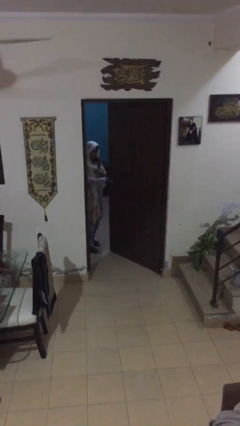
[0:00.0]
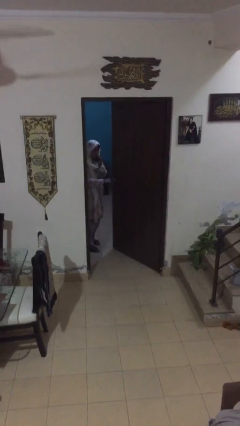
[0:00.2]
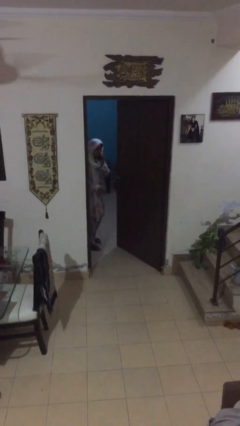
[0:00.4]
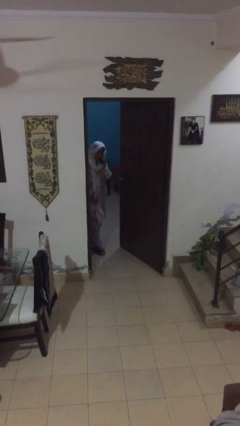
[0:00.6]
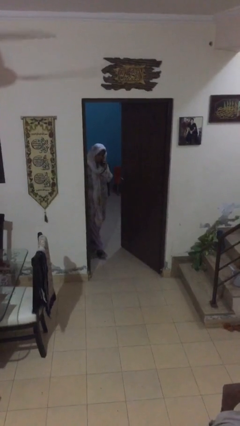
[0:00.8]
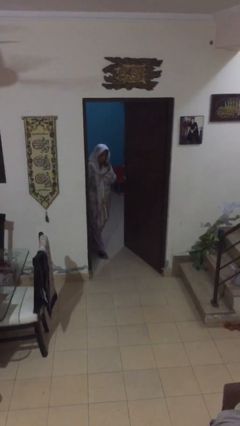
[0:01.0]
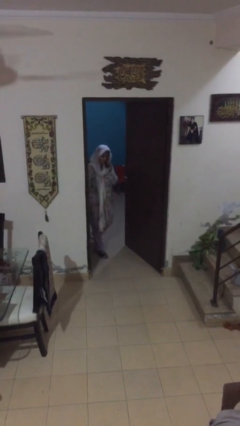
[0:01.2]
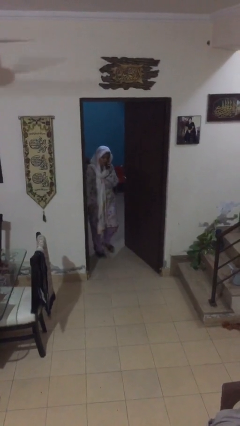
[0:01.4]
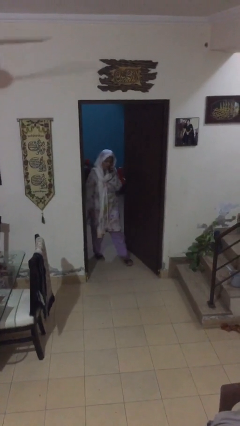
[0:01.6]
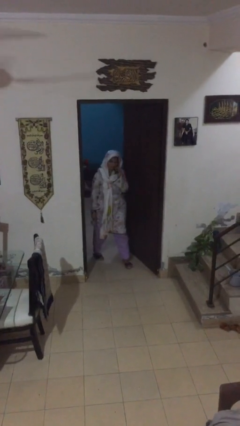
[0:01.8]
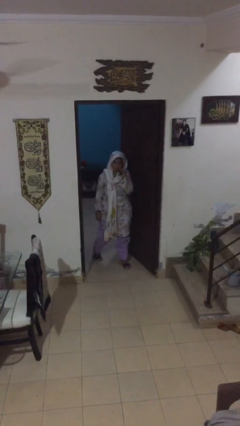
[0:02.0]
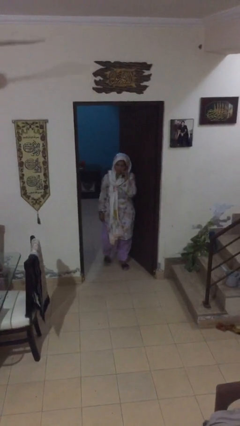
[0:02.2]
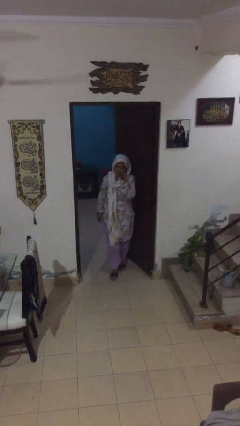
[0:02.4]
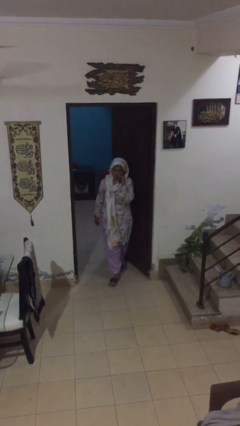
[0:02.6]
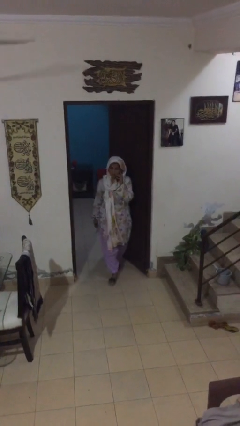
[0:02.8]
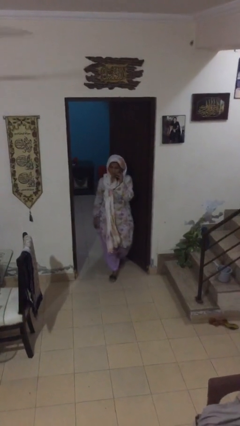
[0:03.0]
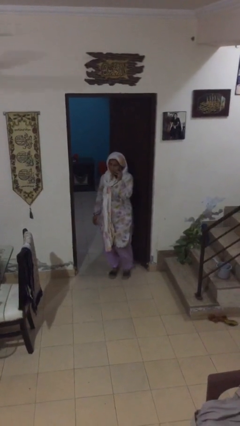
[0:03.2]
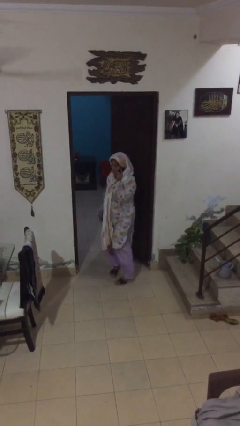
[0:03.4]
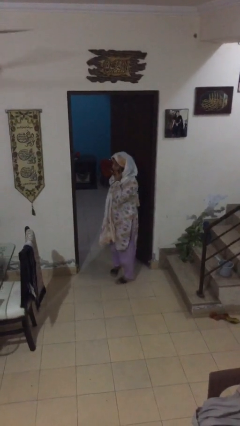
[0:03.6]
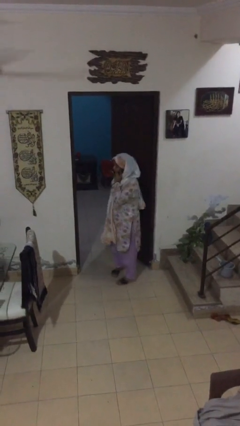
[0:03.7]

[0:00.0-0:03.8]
person enters scene through structure

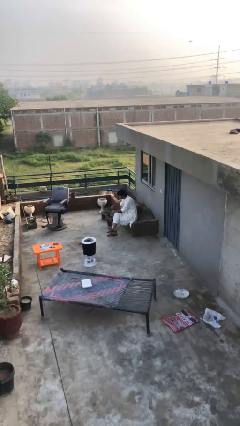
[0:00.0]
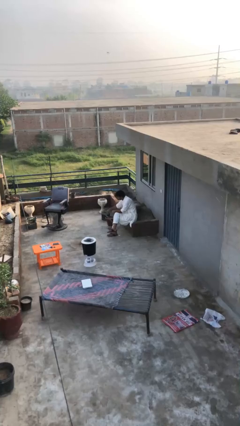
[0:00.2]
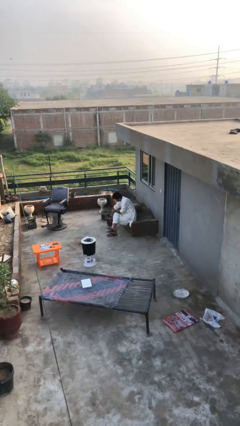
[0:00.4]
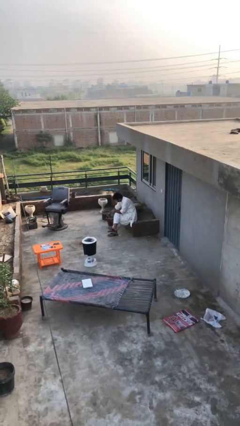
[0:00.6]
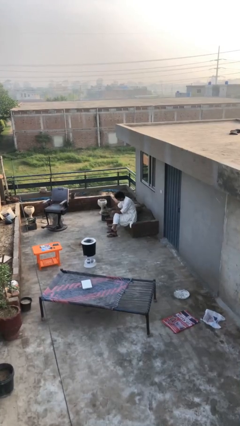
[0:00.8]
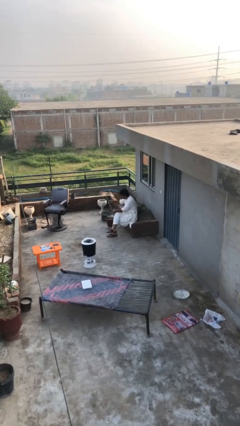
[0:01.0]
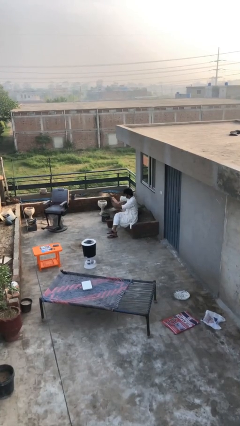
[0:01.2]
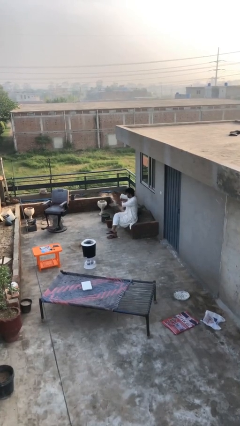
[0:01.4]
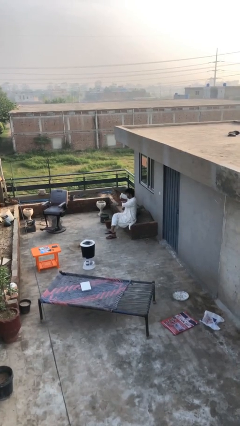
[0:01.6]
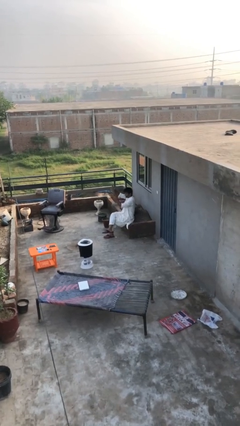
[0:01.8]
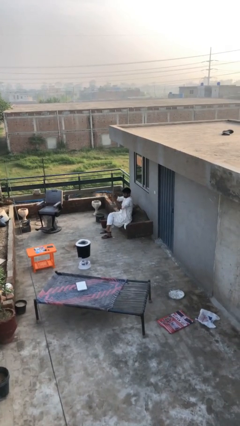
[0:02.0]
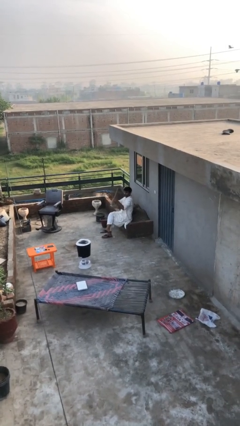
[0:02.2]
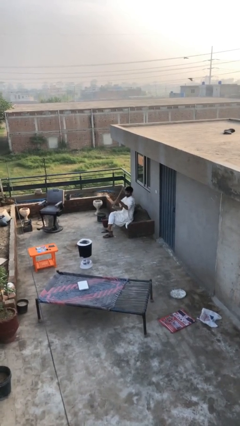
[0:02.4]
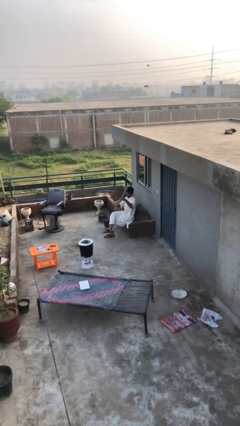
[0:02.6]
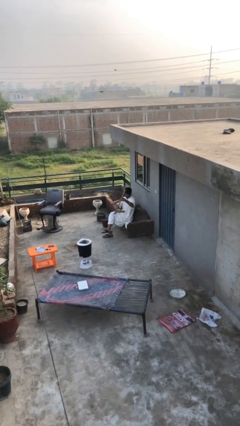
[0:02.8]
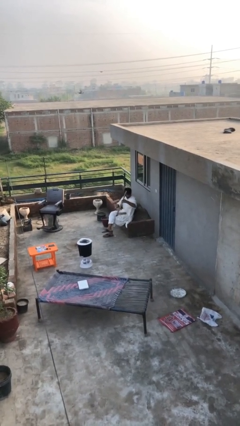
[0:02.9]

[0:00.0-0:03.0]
person picks up object from floor

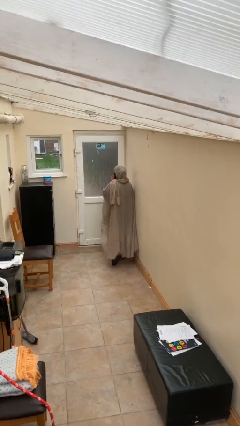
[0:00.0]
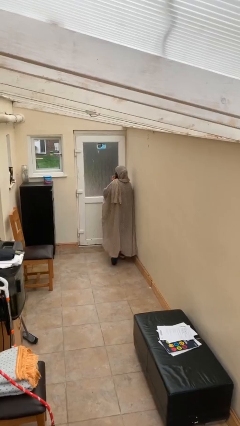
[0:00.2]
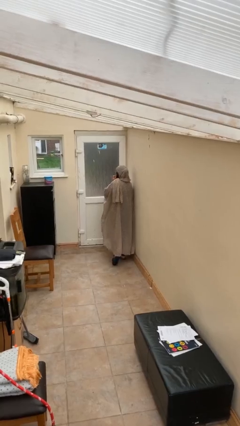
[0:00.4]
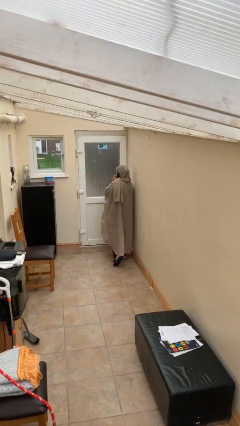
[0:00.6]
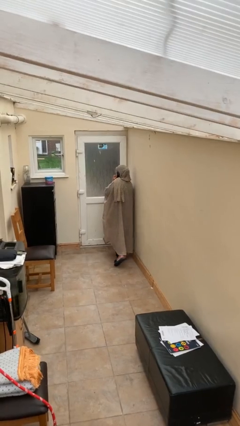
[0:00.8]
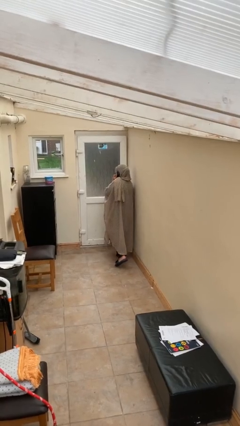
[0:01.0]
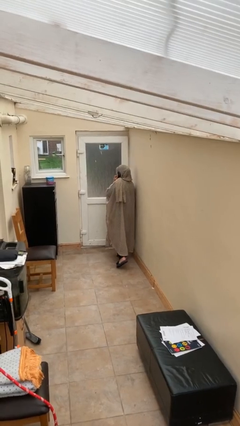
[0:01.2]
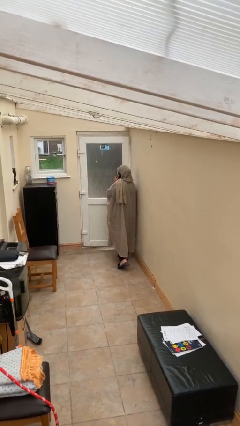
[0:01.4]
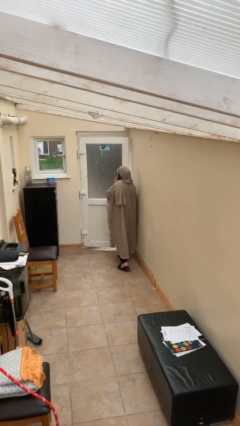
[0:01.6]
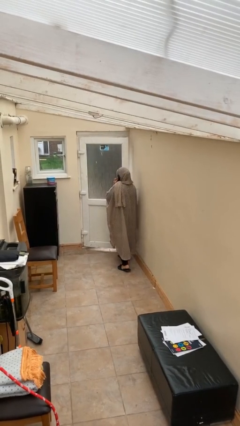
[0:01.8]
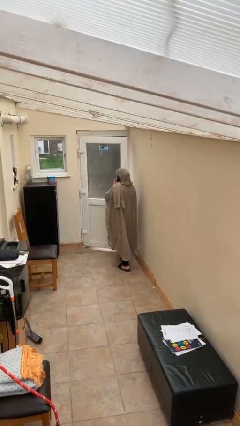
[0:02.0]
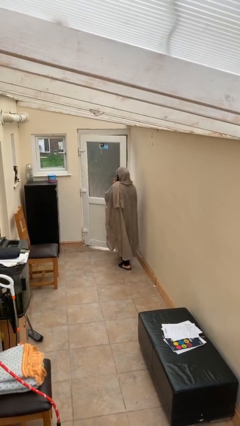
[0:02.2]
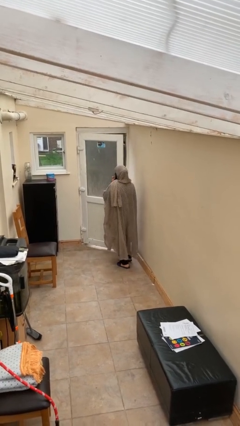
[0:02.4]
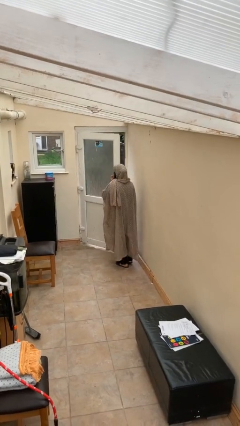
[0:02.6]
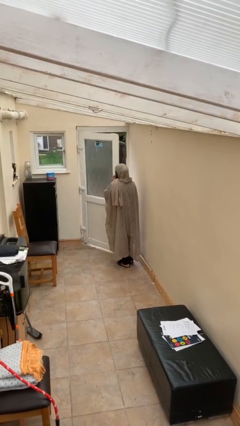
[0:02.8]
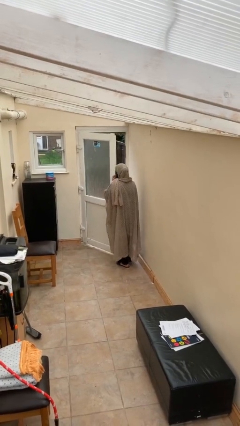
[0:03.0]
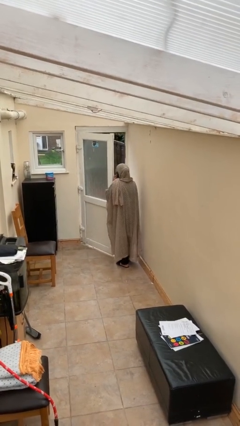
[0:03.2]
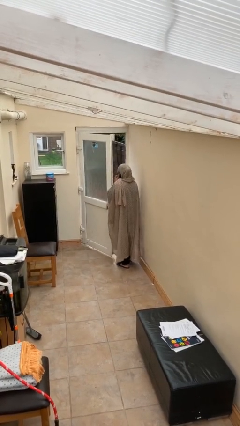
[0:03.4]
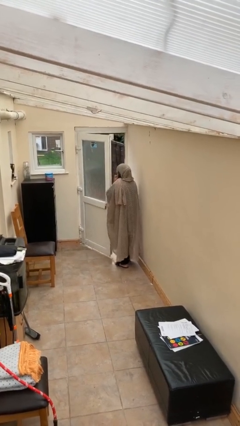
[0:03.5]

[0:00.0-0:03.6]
person opens facility door

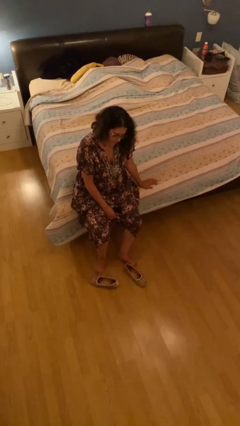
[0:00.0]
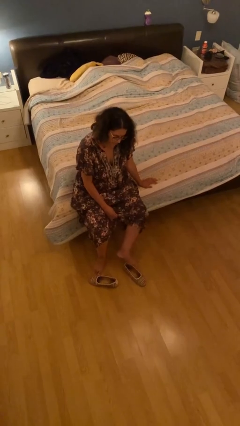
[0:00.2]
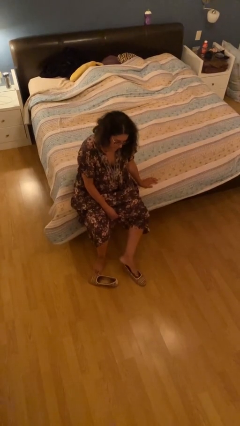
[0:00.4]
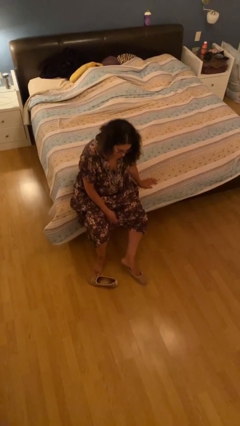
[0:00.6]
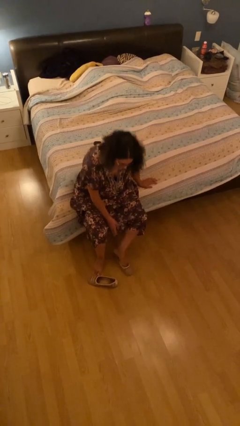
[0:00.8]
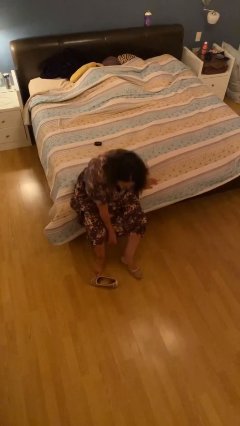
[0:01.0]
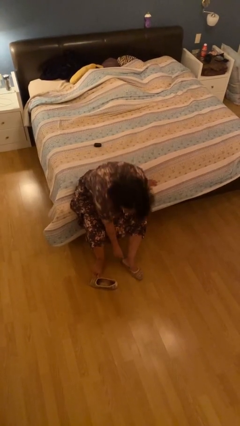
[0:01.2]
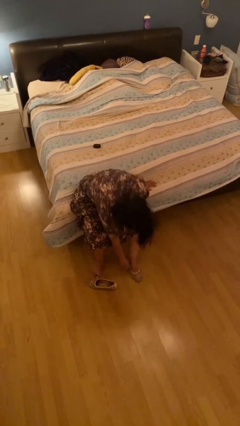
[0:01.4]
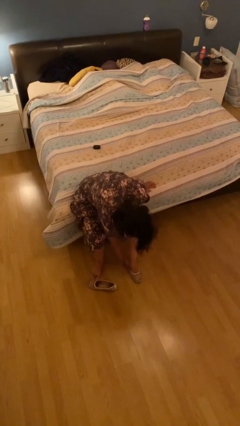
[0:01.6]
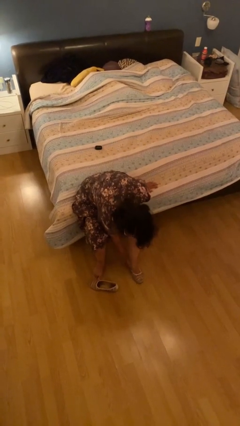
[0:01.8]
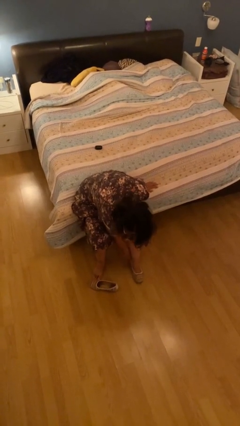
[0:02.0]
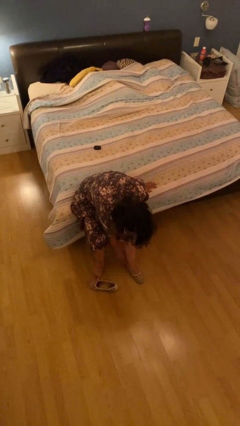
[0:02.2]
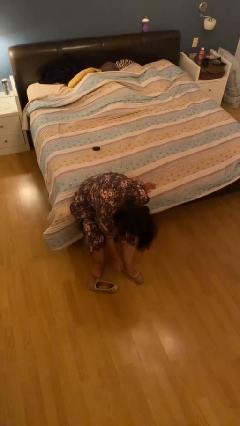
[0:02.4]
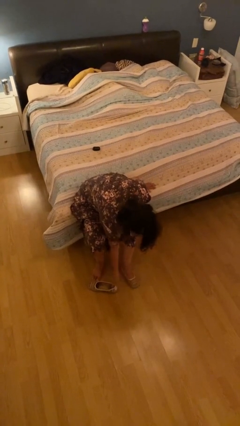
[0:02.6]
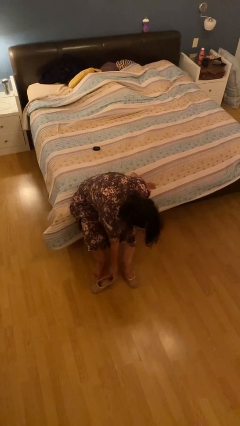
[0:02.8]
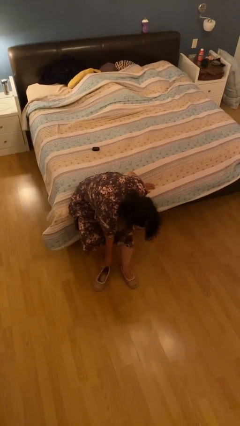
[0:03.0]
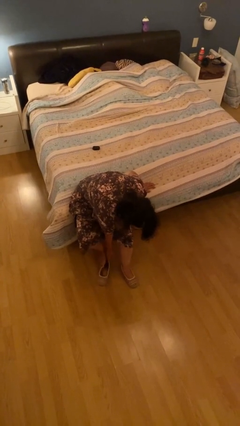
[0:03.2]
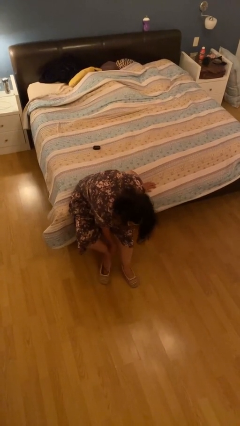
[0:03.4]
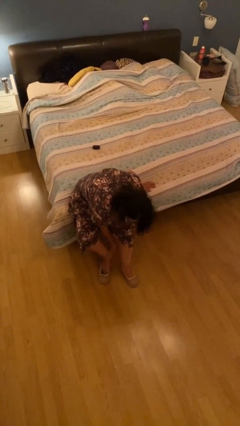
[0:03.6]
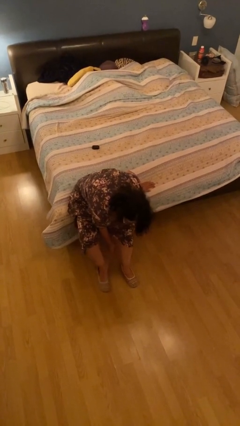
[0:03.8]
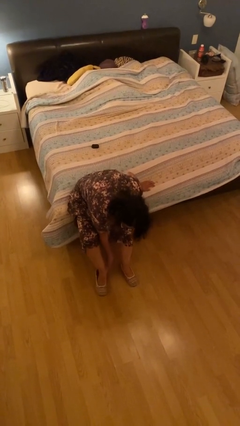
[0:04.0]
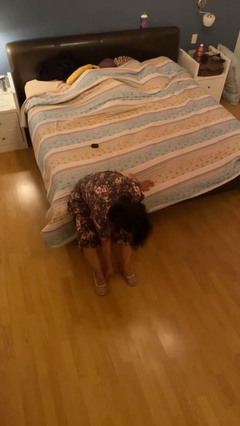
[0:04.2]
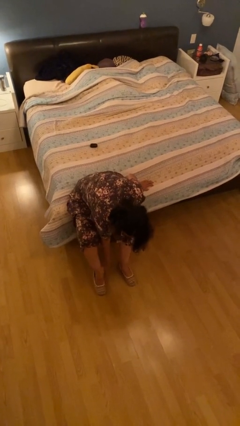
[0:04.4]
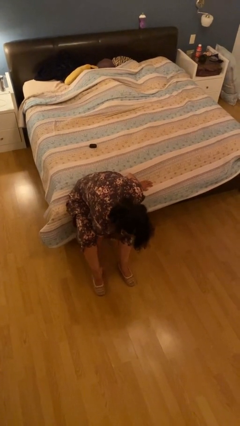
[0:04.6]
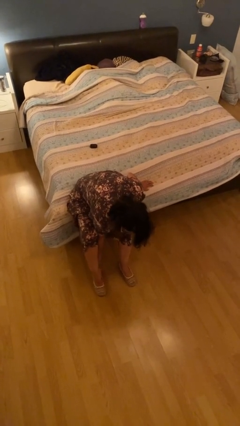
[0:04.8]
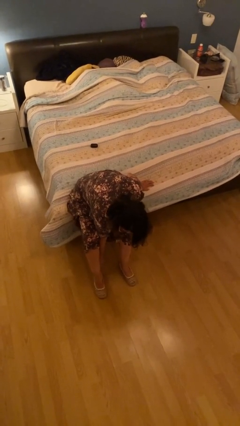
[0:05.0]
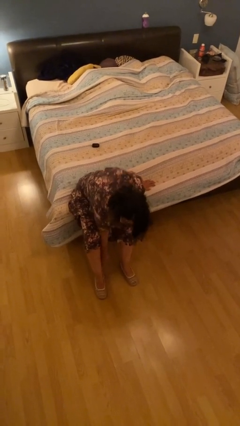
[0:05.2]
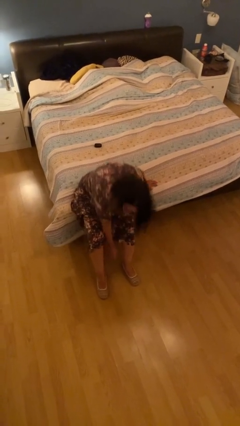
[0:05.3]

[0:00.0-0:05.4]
person puts on shoes

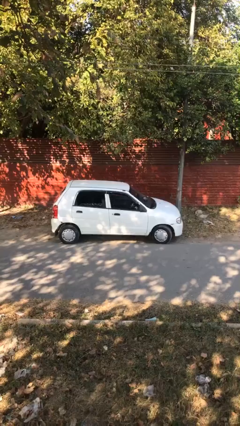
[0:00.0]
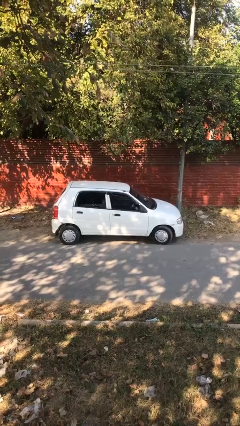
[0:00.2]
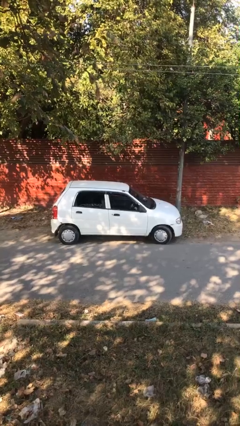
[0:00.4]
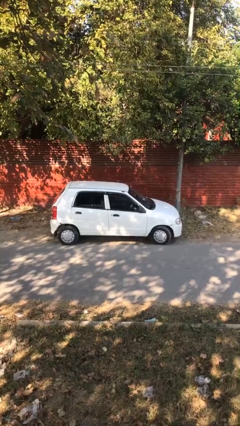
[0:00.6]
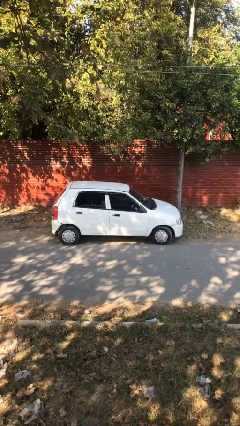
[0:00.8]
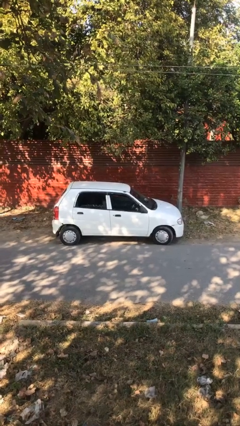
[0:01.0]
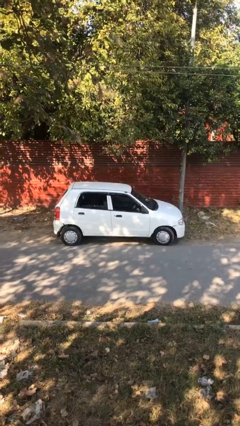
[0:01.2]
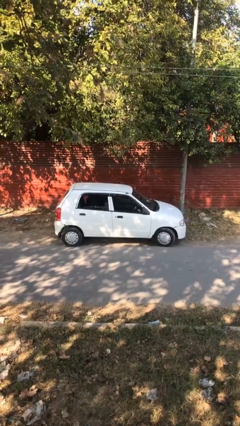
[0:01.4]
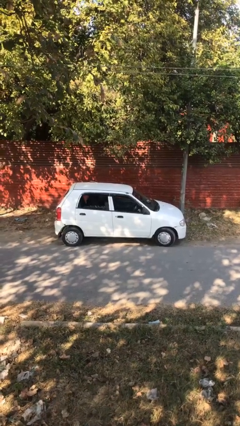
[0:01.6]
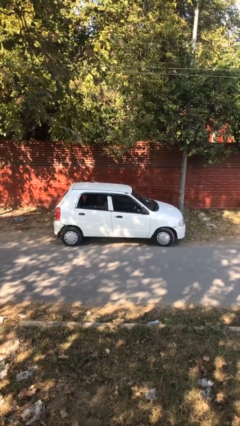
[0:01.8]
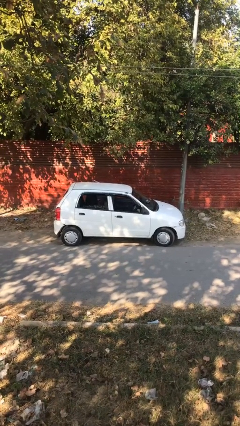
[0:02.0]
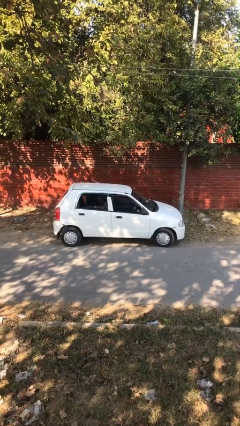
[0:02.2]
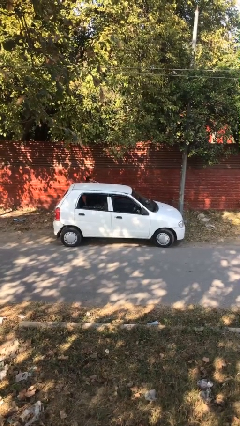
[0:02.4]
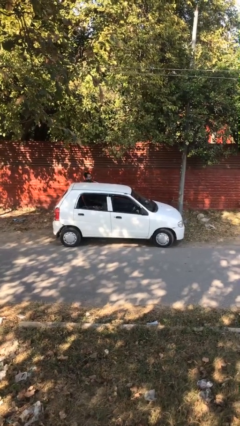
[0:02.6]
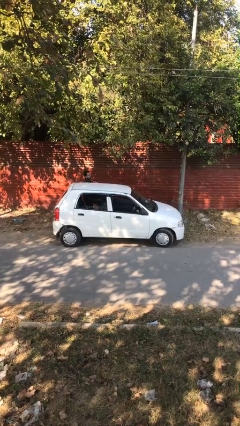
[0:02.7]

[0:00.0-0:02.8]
car drops off person
